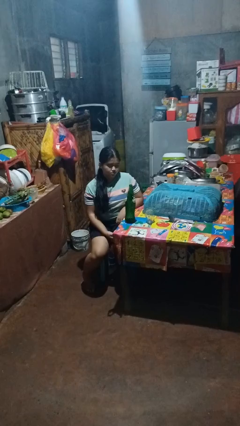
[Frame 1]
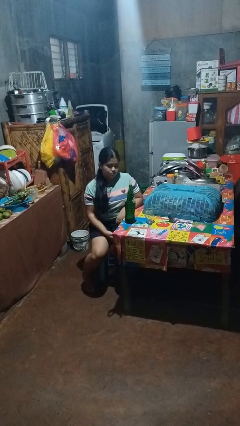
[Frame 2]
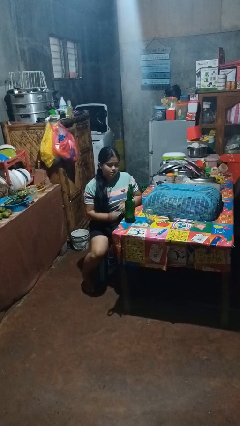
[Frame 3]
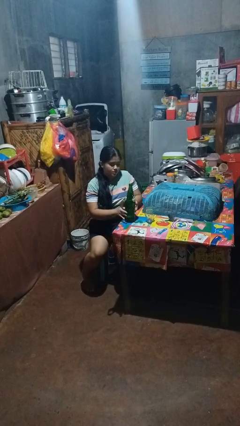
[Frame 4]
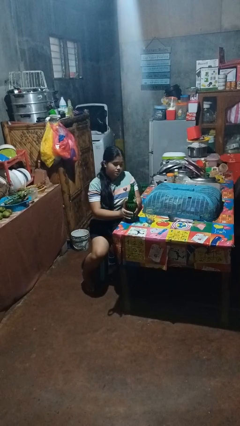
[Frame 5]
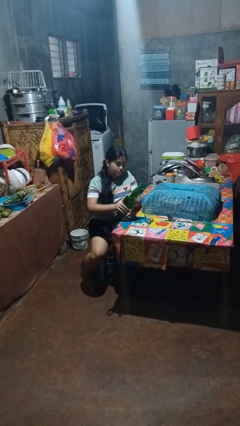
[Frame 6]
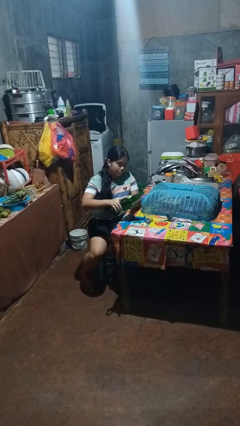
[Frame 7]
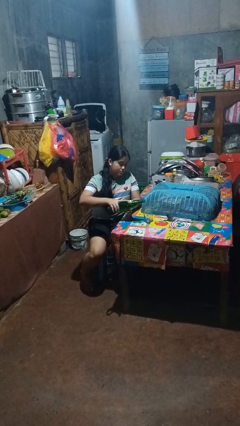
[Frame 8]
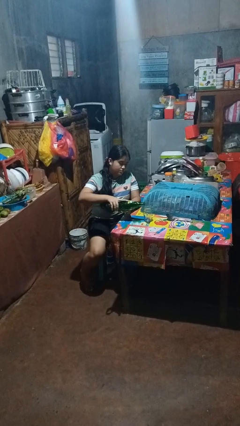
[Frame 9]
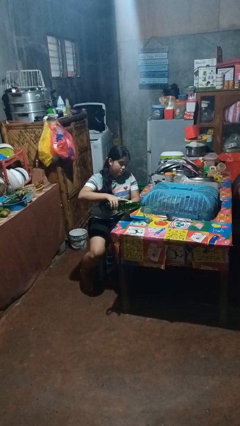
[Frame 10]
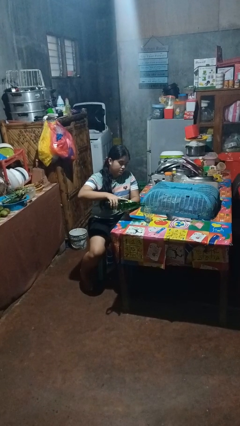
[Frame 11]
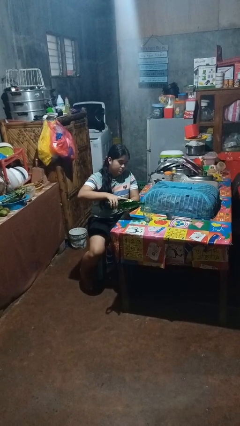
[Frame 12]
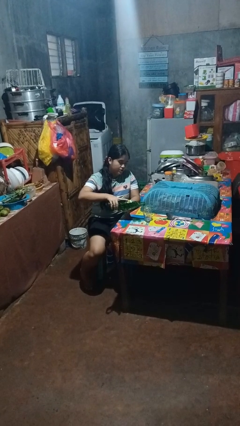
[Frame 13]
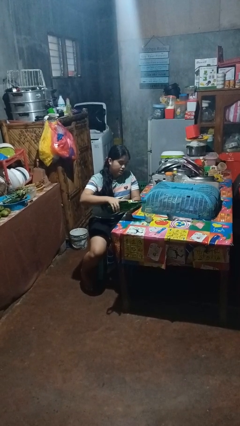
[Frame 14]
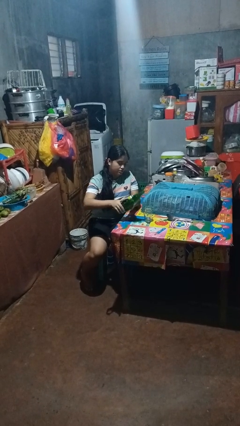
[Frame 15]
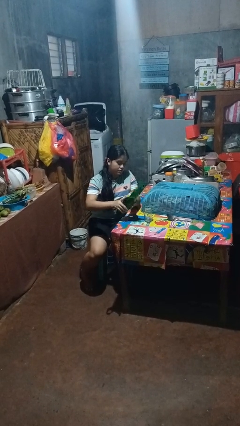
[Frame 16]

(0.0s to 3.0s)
person pours liquid into cup

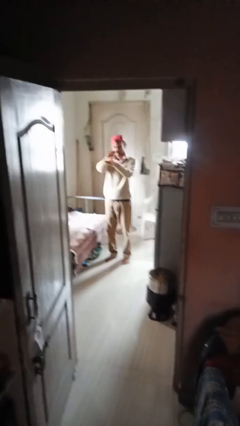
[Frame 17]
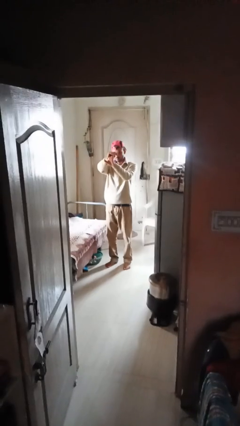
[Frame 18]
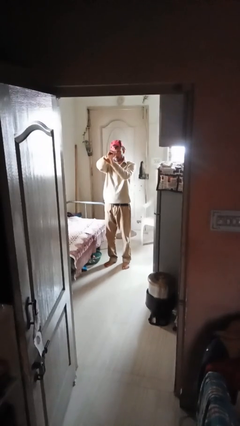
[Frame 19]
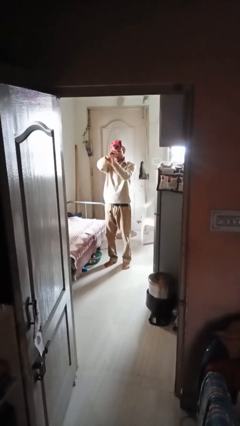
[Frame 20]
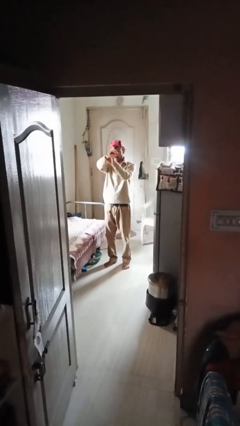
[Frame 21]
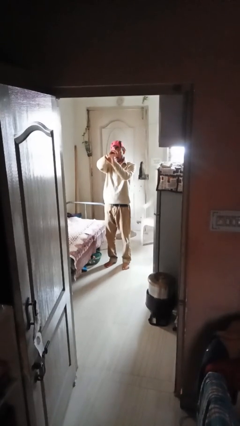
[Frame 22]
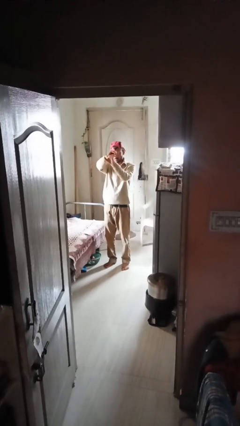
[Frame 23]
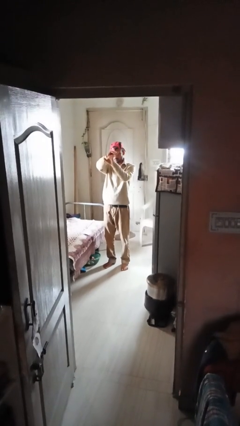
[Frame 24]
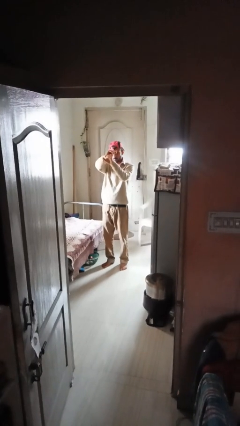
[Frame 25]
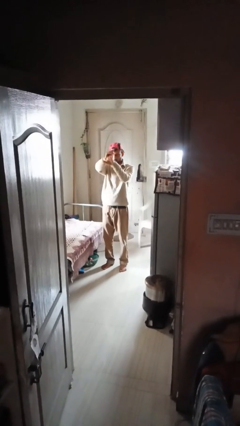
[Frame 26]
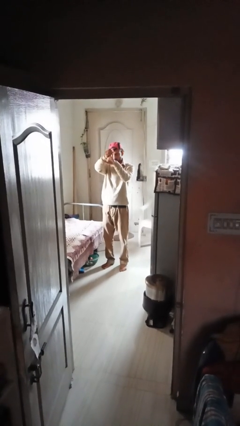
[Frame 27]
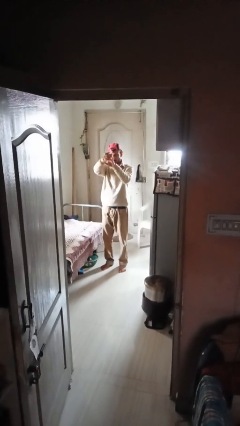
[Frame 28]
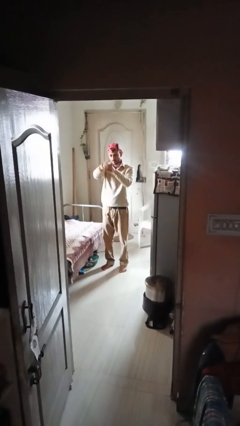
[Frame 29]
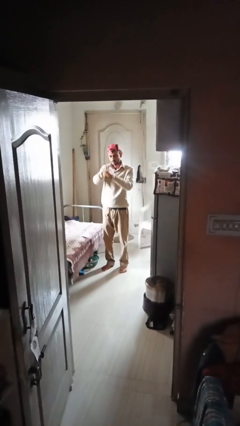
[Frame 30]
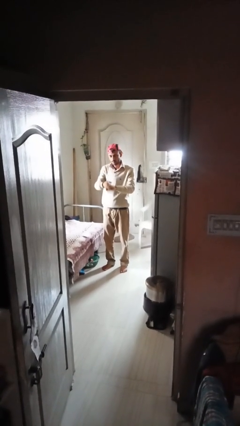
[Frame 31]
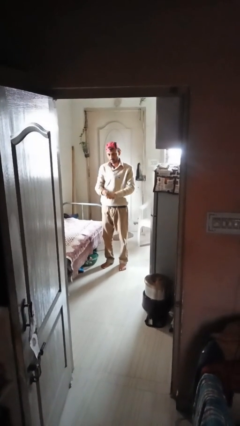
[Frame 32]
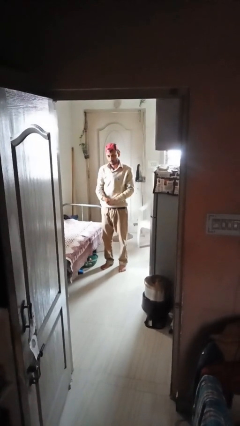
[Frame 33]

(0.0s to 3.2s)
person cracks knuckles

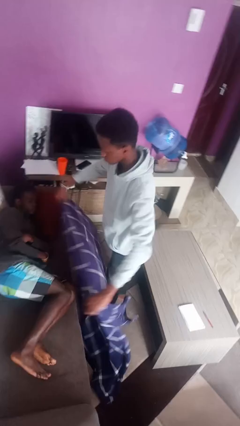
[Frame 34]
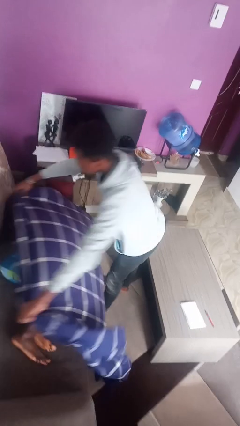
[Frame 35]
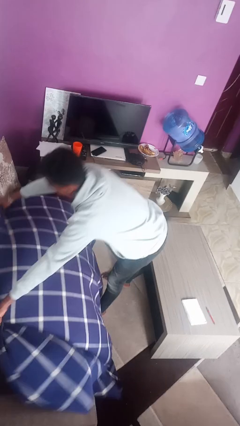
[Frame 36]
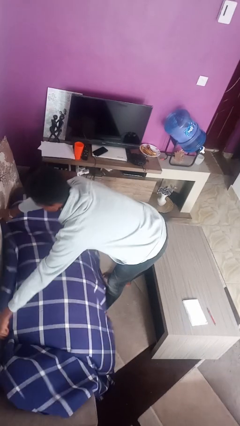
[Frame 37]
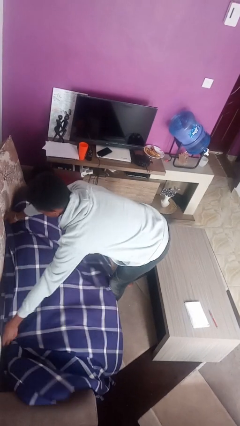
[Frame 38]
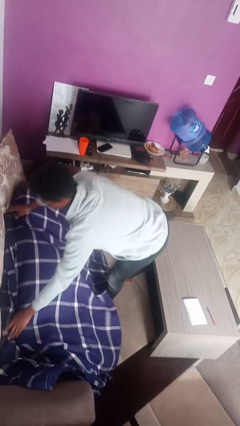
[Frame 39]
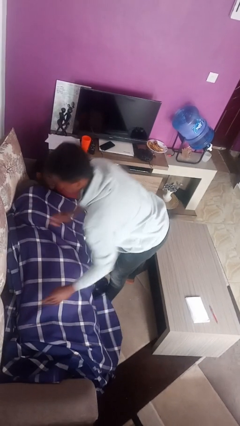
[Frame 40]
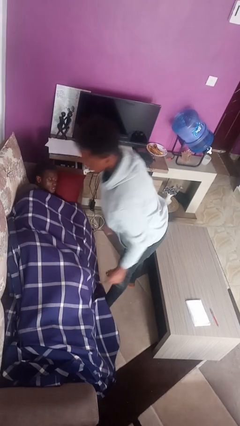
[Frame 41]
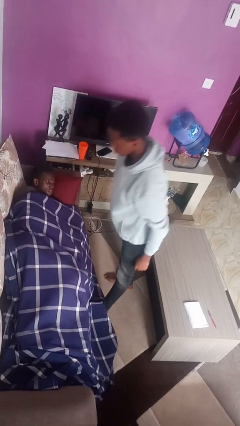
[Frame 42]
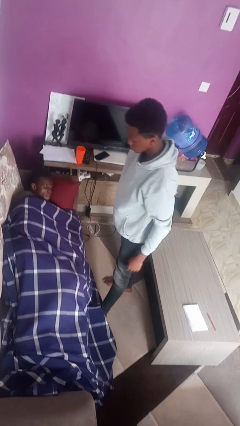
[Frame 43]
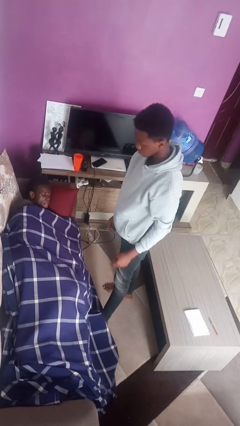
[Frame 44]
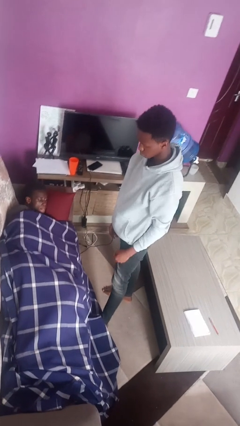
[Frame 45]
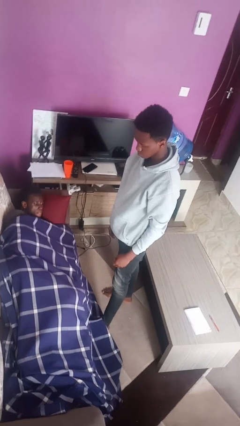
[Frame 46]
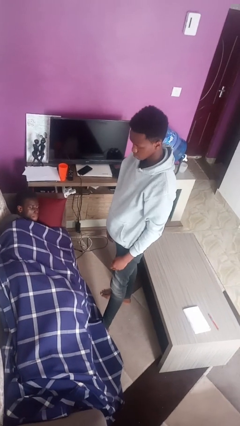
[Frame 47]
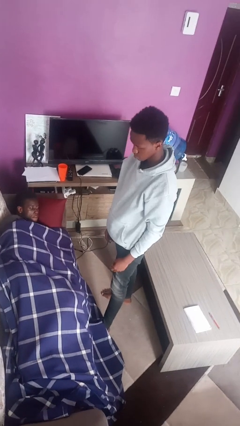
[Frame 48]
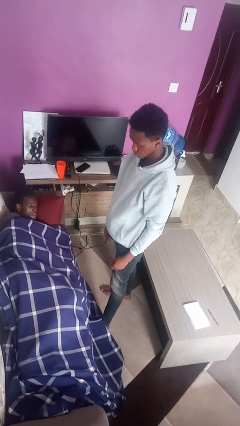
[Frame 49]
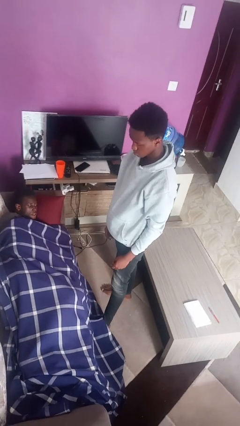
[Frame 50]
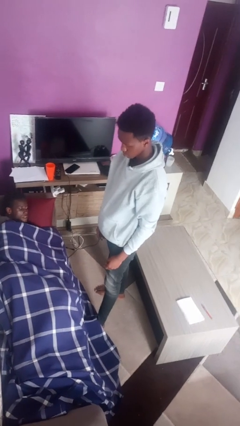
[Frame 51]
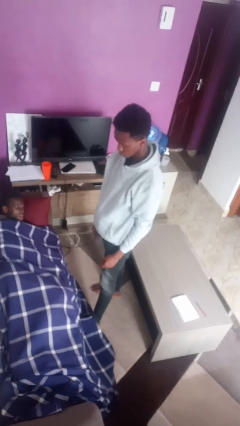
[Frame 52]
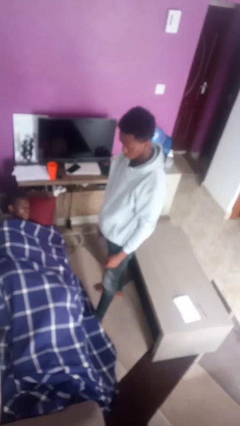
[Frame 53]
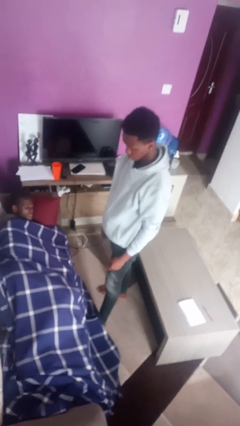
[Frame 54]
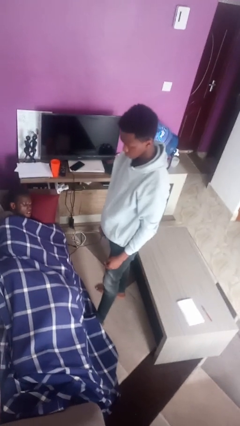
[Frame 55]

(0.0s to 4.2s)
person covers friend with blanket

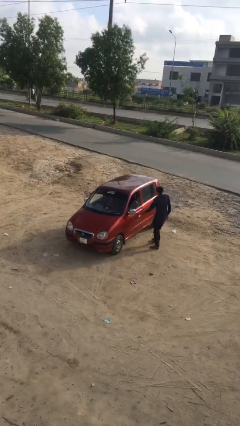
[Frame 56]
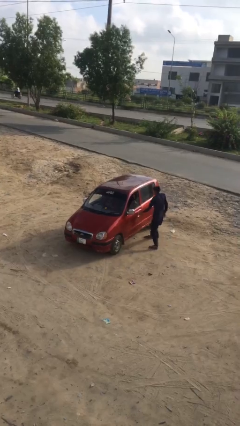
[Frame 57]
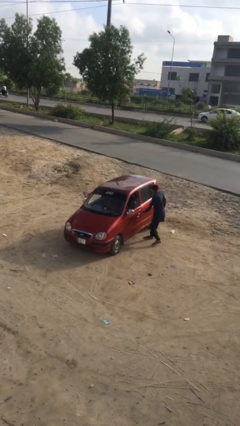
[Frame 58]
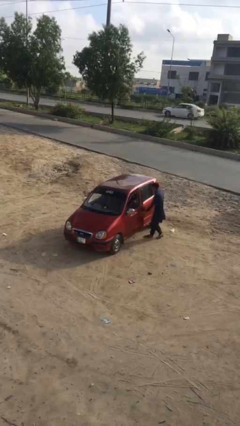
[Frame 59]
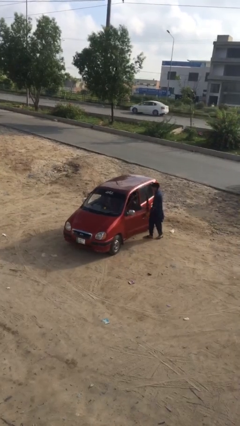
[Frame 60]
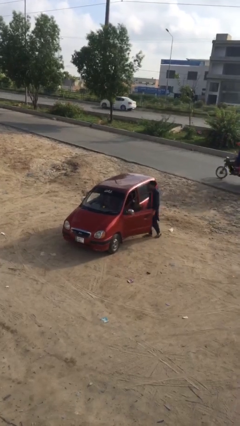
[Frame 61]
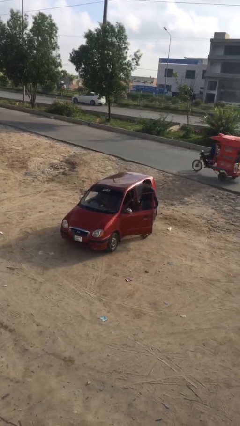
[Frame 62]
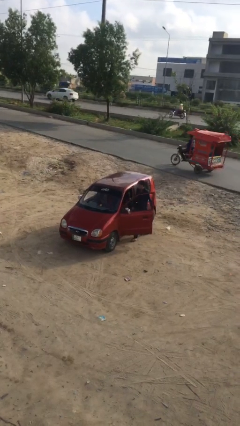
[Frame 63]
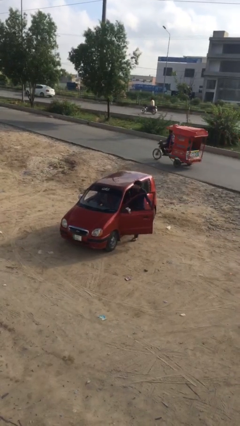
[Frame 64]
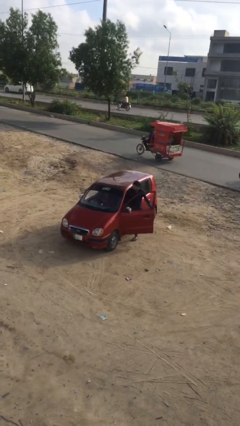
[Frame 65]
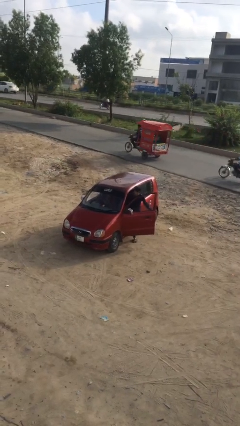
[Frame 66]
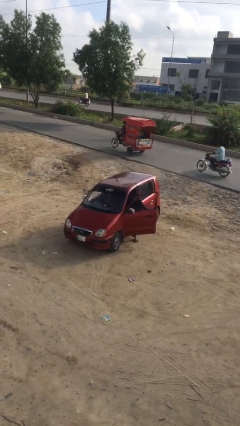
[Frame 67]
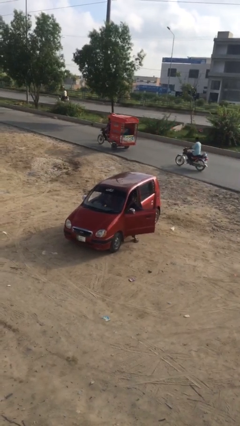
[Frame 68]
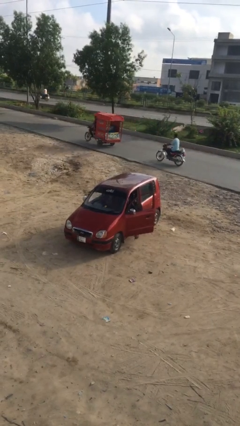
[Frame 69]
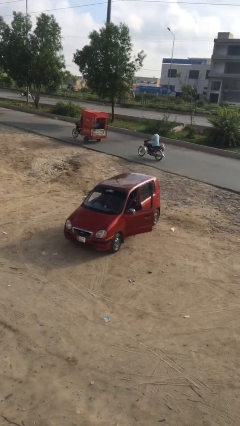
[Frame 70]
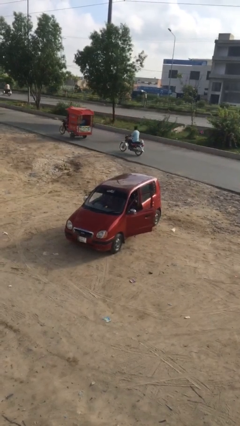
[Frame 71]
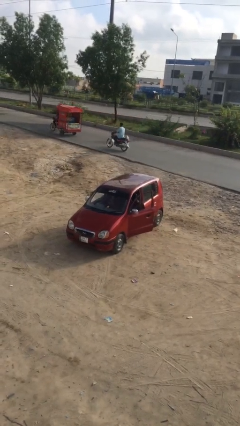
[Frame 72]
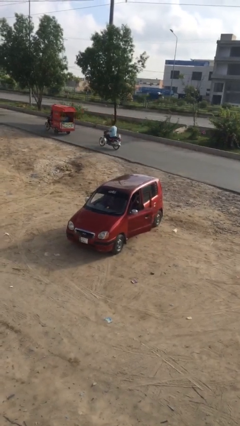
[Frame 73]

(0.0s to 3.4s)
car picks up person

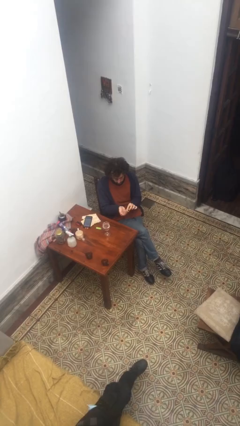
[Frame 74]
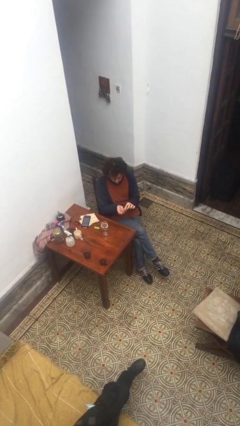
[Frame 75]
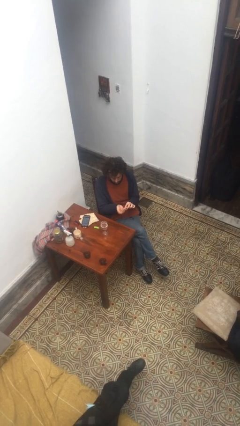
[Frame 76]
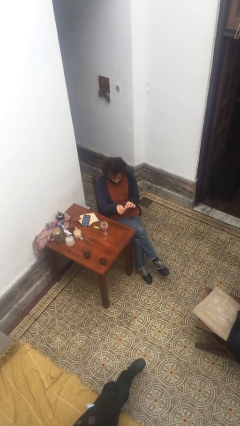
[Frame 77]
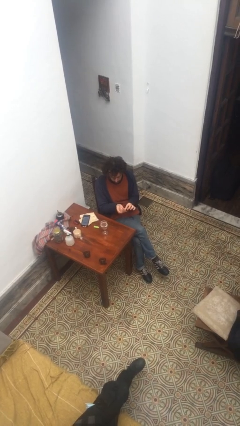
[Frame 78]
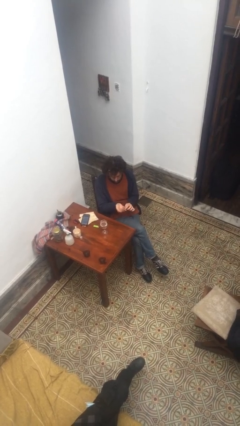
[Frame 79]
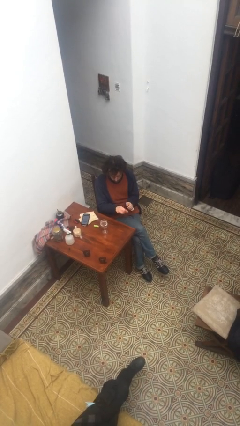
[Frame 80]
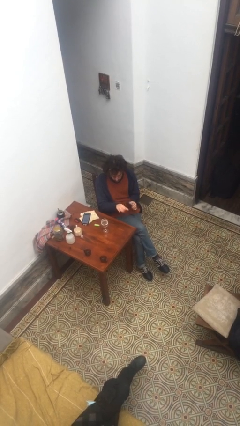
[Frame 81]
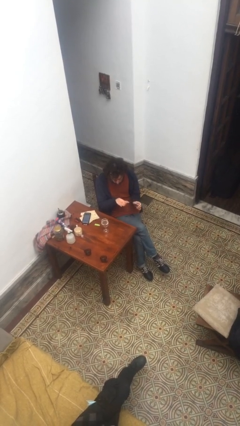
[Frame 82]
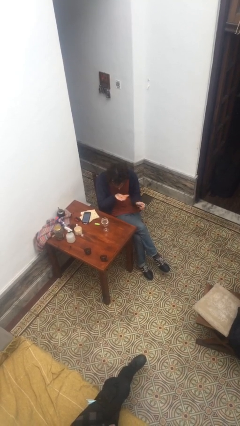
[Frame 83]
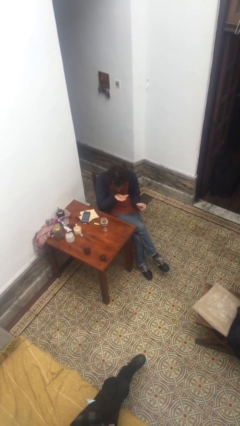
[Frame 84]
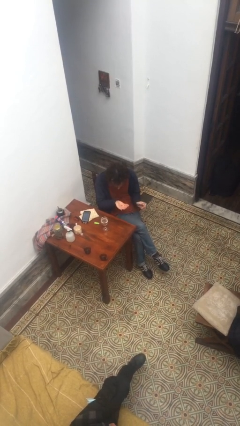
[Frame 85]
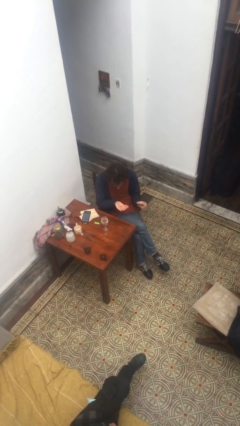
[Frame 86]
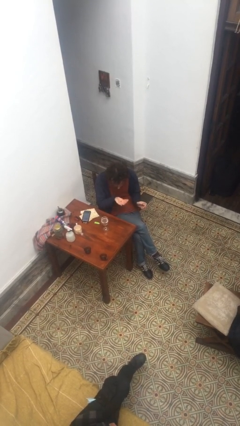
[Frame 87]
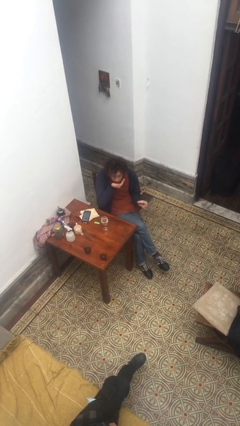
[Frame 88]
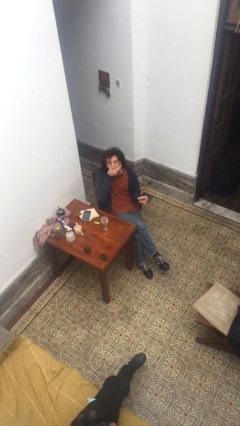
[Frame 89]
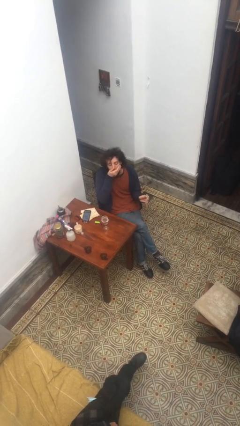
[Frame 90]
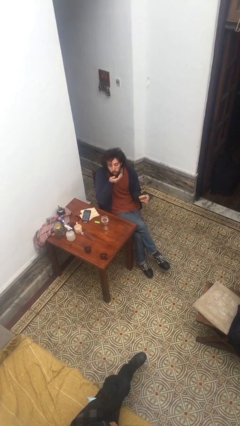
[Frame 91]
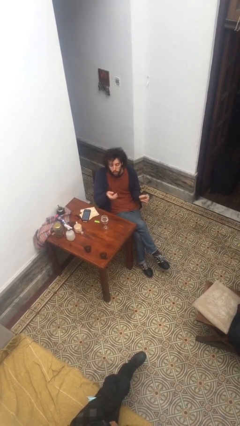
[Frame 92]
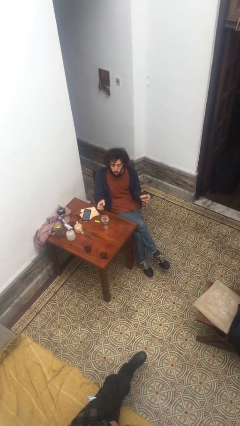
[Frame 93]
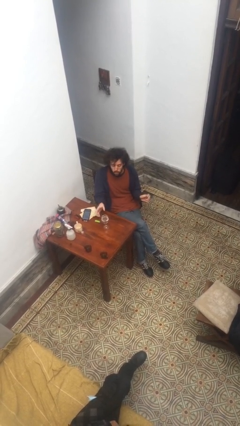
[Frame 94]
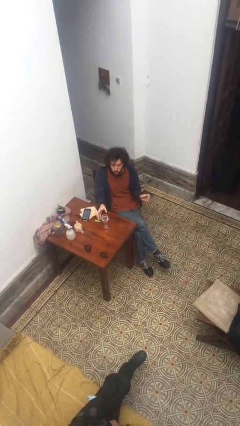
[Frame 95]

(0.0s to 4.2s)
person takes medicine pills
